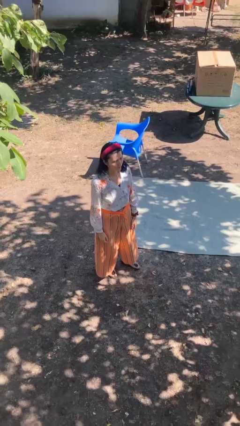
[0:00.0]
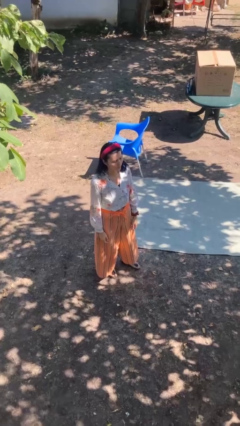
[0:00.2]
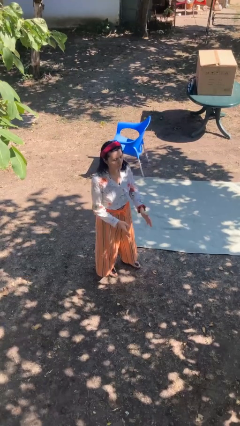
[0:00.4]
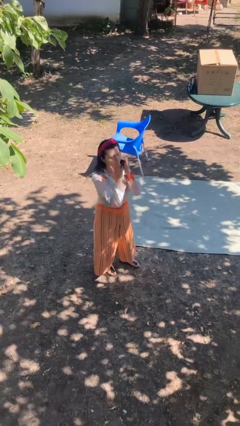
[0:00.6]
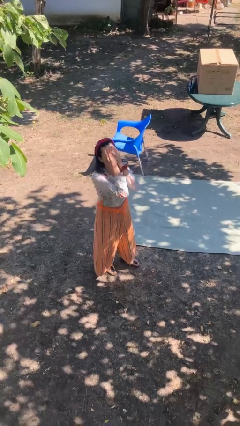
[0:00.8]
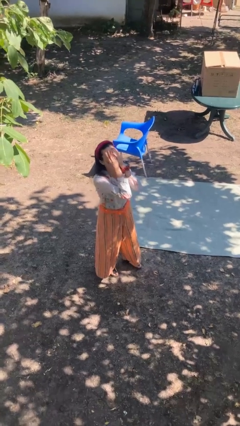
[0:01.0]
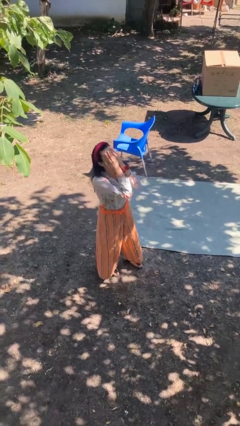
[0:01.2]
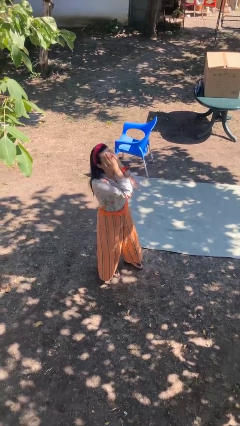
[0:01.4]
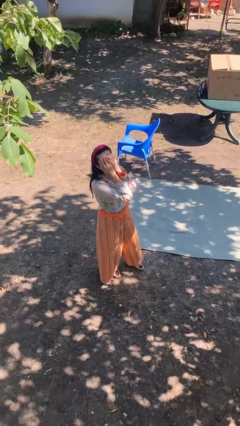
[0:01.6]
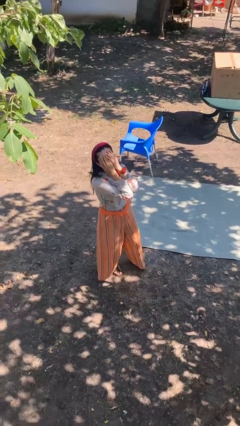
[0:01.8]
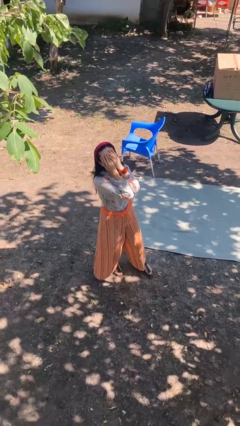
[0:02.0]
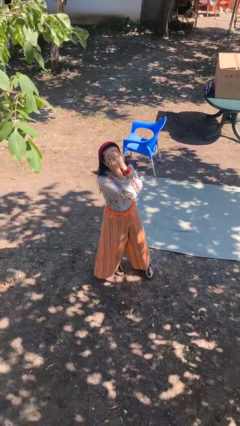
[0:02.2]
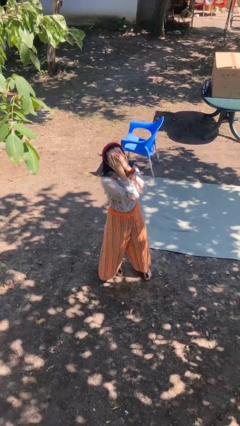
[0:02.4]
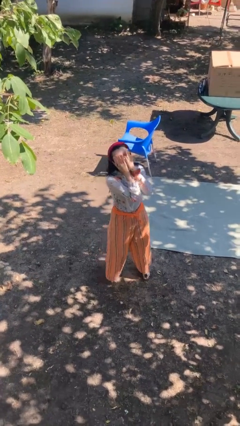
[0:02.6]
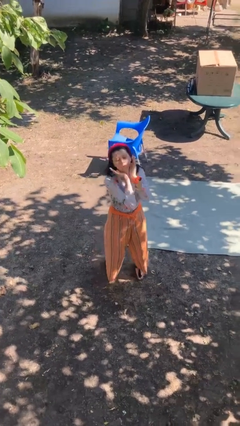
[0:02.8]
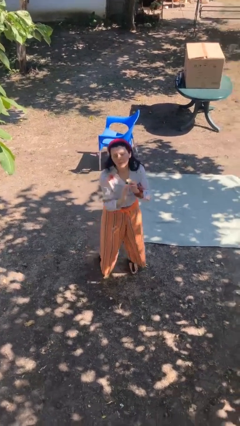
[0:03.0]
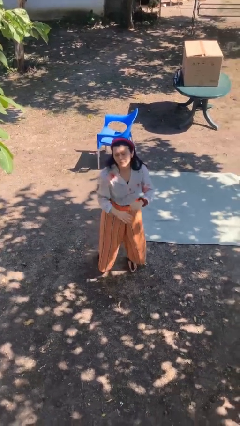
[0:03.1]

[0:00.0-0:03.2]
person covers face with hands

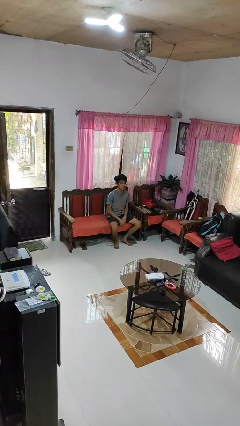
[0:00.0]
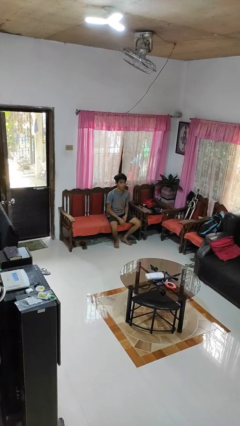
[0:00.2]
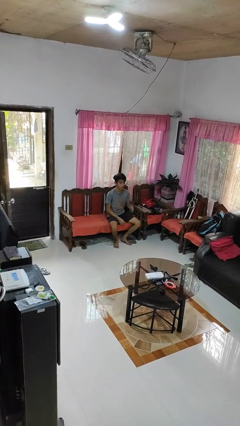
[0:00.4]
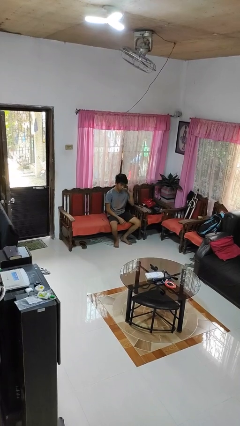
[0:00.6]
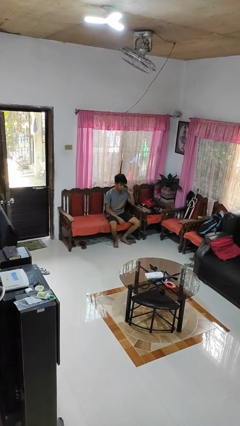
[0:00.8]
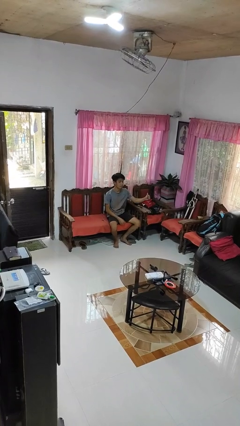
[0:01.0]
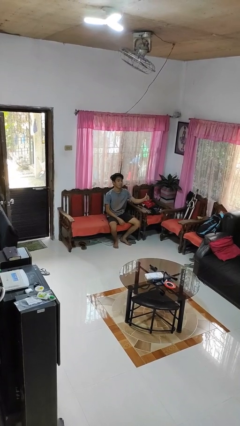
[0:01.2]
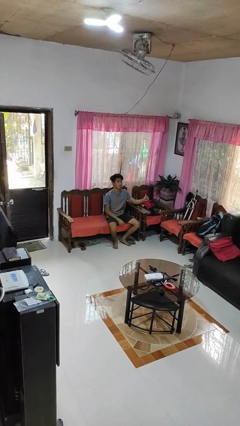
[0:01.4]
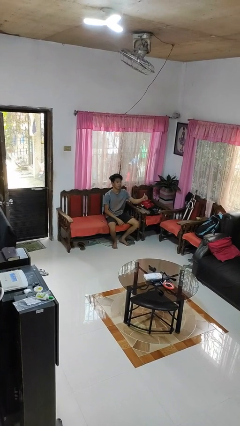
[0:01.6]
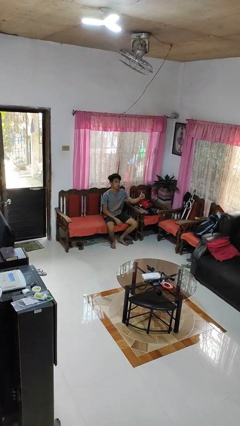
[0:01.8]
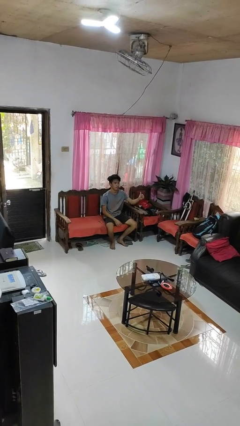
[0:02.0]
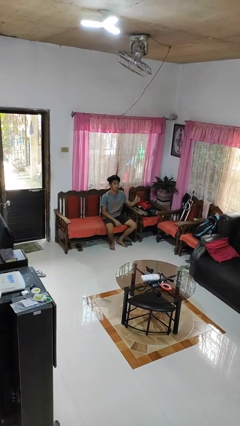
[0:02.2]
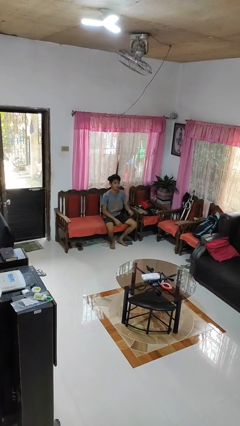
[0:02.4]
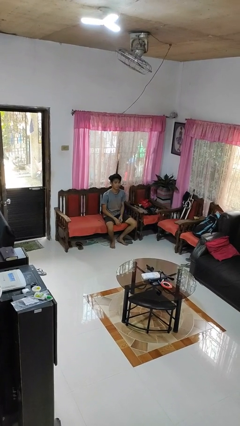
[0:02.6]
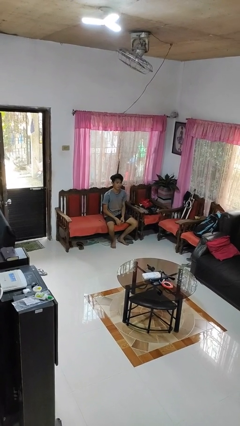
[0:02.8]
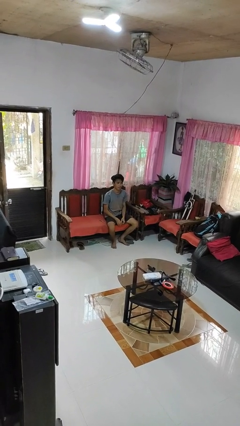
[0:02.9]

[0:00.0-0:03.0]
person gestures thumbs up

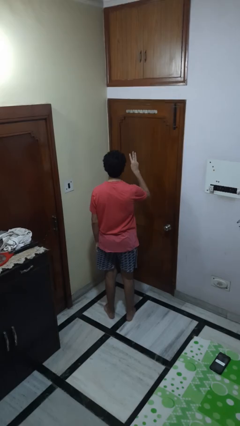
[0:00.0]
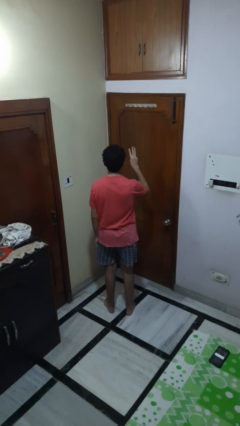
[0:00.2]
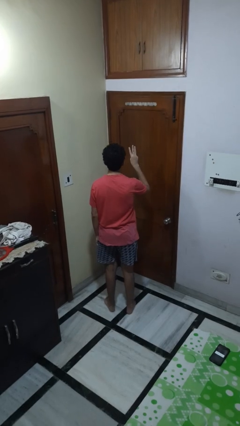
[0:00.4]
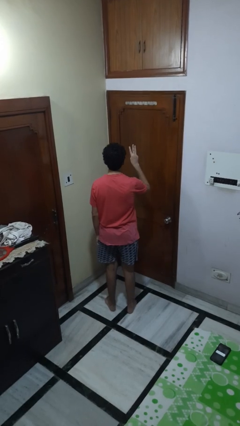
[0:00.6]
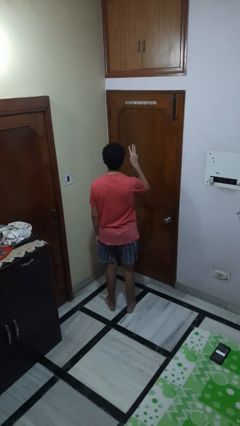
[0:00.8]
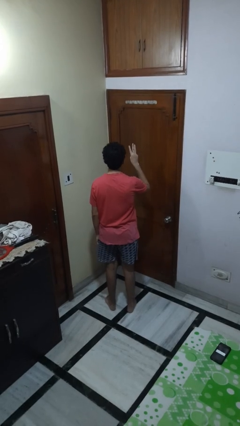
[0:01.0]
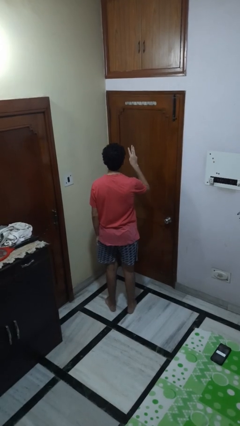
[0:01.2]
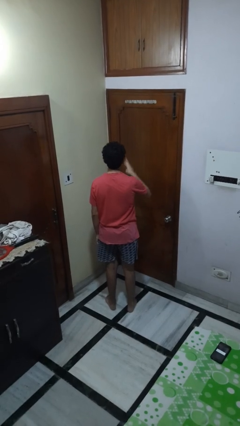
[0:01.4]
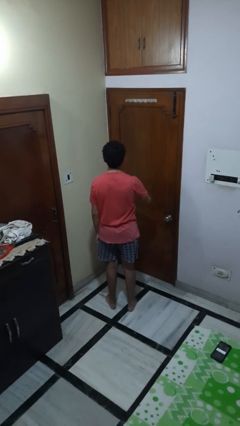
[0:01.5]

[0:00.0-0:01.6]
person gestures number three

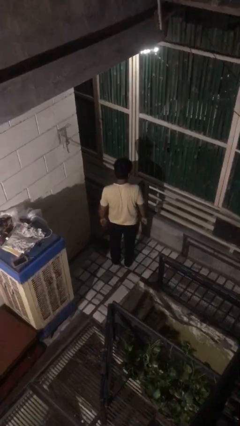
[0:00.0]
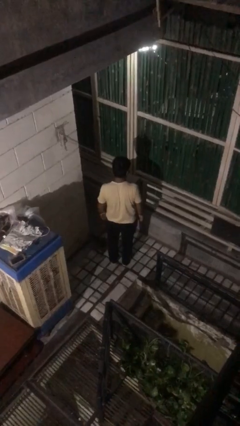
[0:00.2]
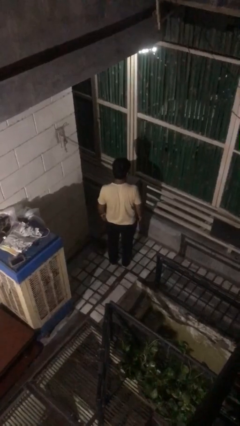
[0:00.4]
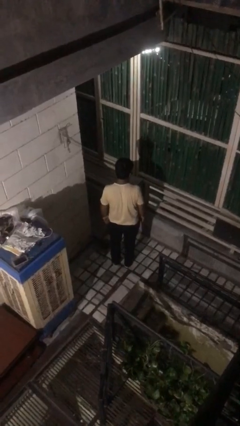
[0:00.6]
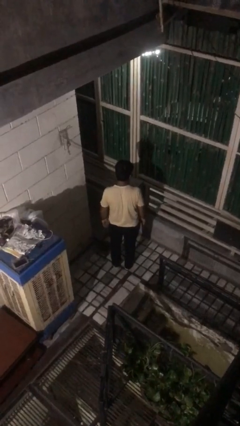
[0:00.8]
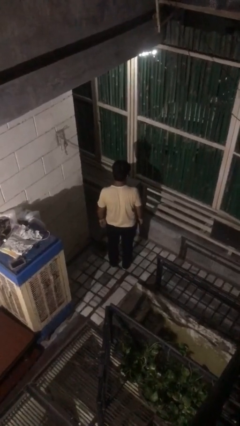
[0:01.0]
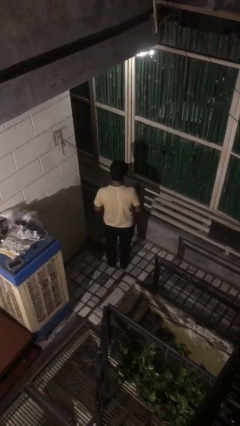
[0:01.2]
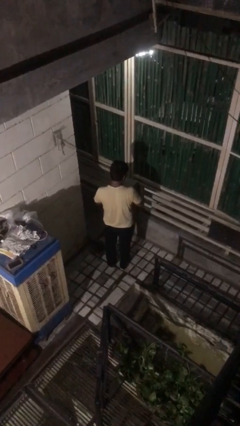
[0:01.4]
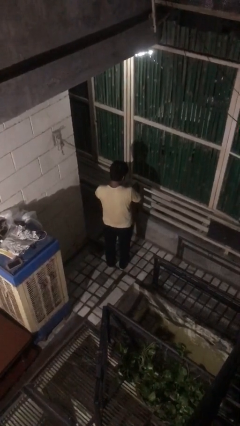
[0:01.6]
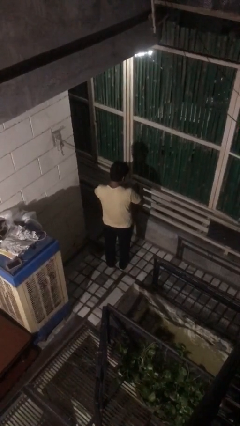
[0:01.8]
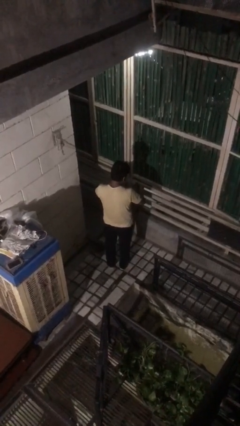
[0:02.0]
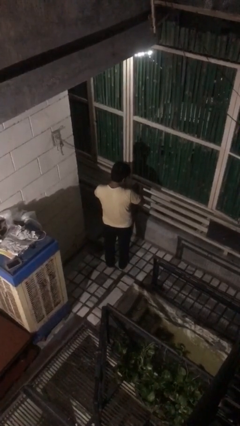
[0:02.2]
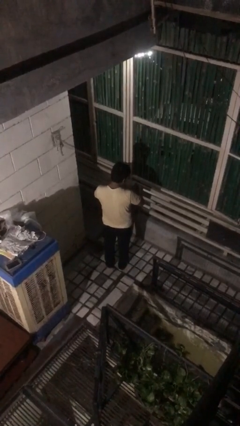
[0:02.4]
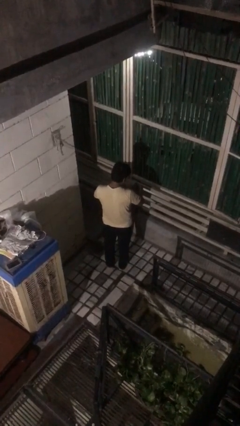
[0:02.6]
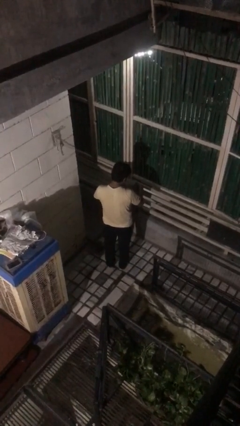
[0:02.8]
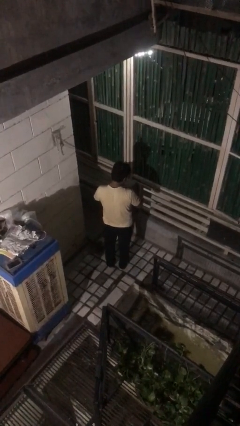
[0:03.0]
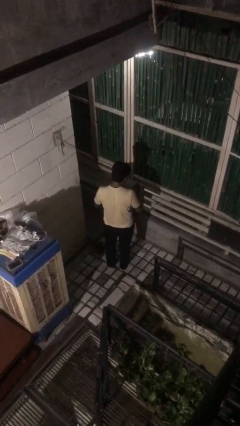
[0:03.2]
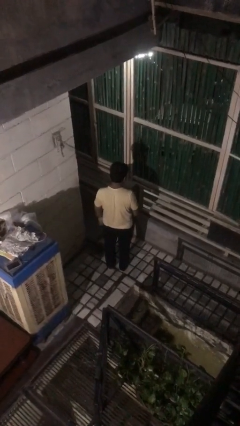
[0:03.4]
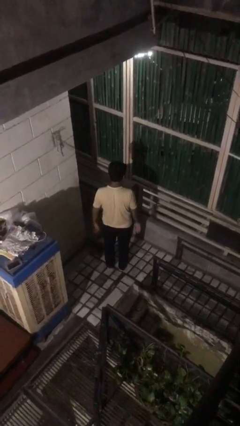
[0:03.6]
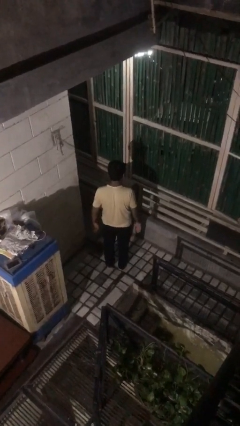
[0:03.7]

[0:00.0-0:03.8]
person swats bug

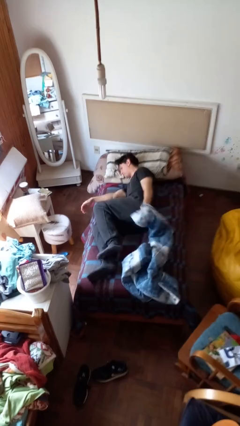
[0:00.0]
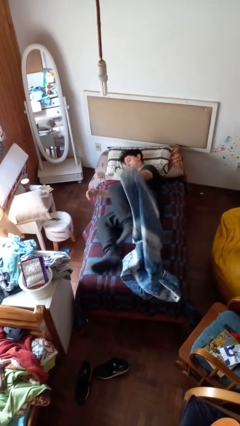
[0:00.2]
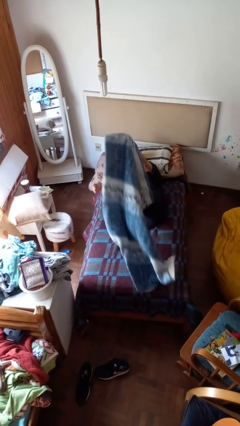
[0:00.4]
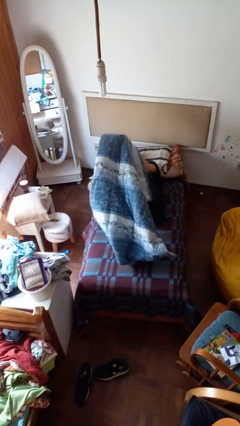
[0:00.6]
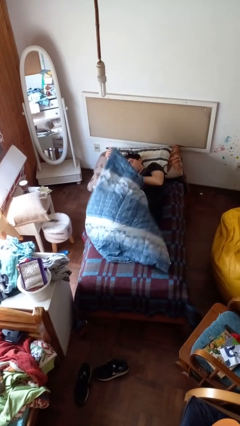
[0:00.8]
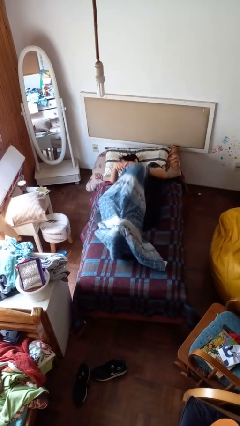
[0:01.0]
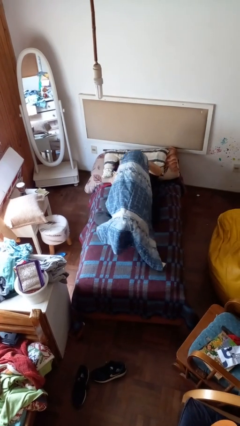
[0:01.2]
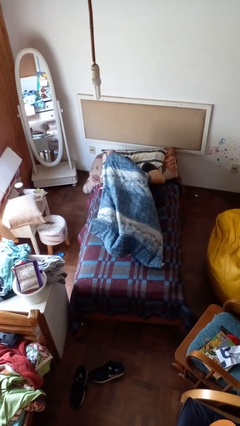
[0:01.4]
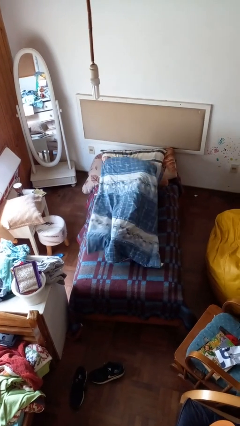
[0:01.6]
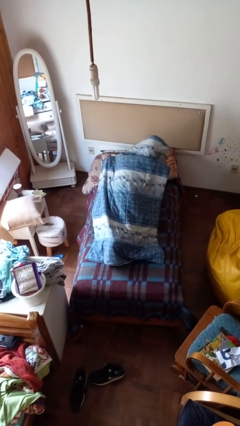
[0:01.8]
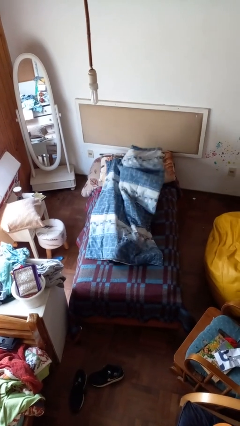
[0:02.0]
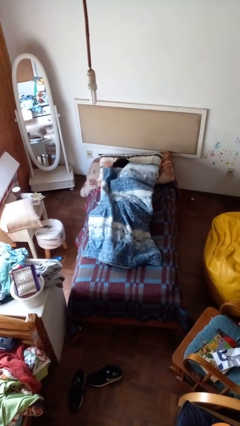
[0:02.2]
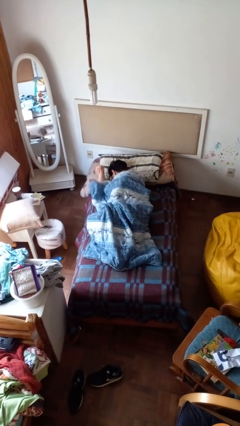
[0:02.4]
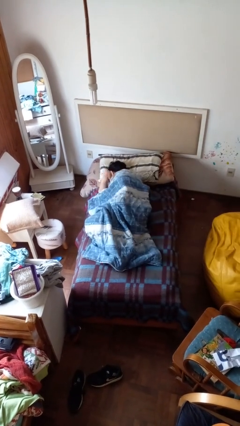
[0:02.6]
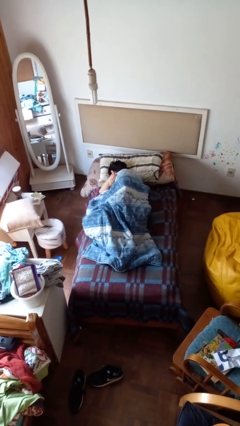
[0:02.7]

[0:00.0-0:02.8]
person covers with bedsheets

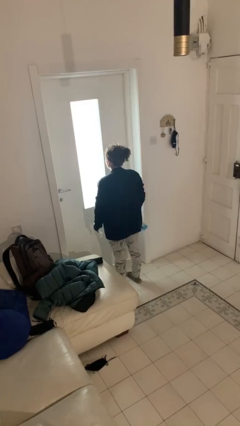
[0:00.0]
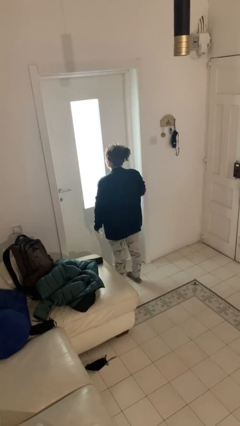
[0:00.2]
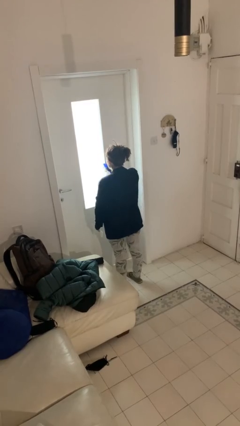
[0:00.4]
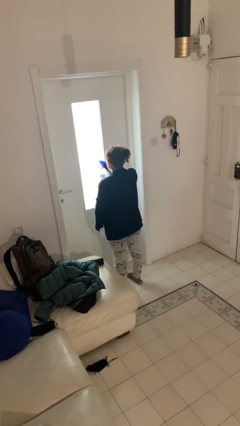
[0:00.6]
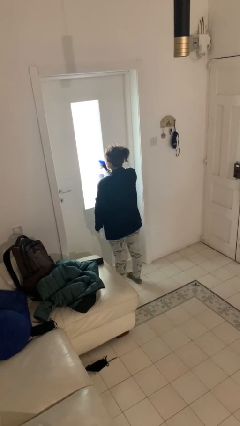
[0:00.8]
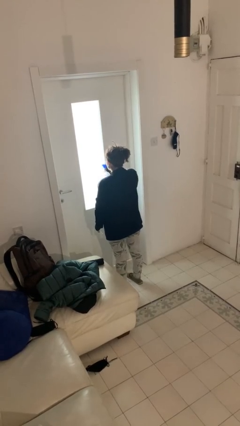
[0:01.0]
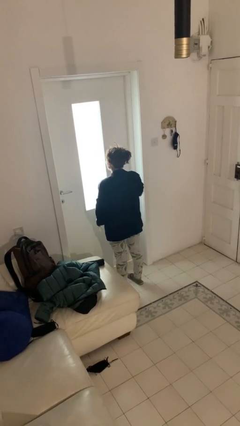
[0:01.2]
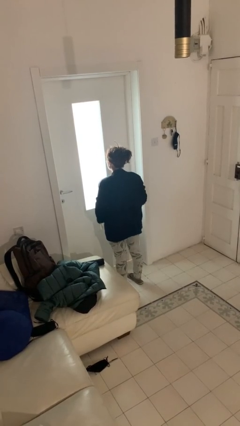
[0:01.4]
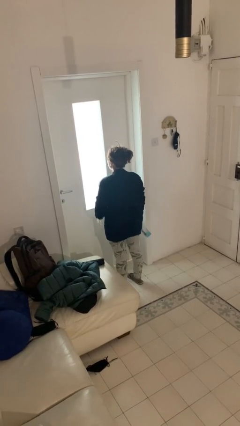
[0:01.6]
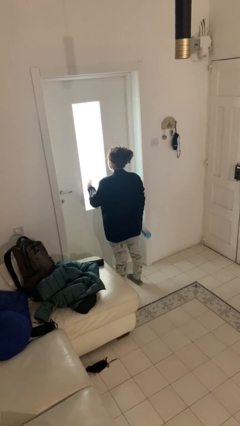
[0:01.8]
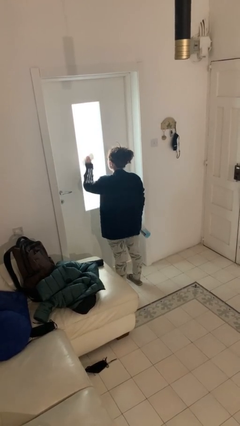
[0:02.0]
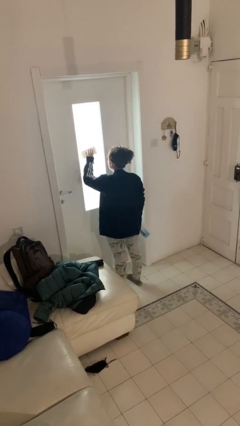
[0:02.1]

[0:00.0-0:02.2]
person sprays from bottle

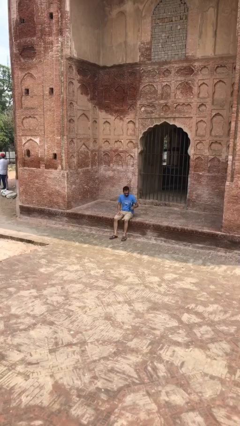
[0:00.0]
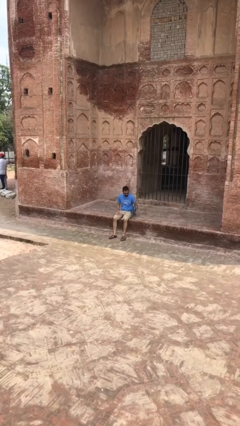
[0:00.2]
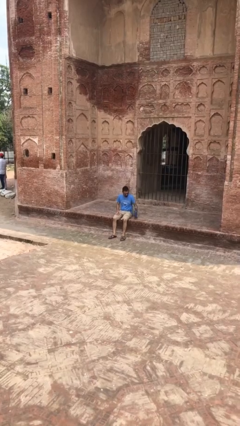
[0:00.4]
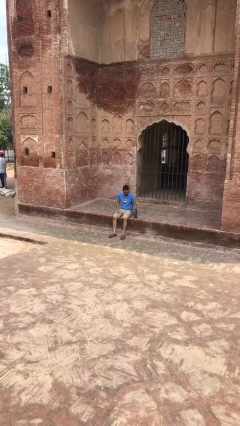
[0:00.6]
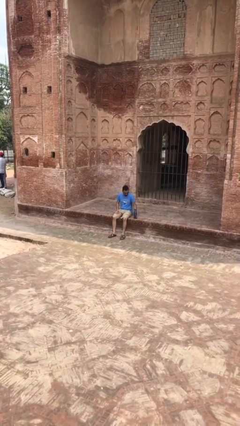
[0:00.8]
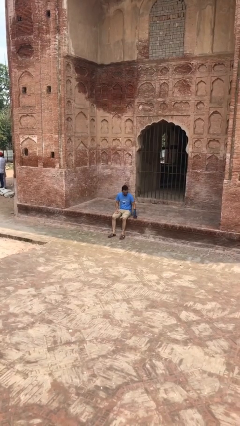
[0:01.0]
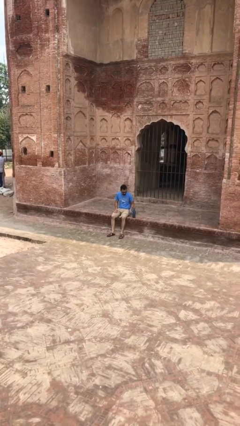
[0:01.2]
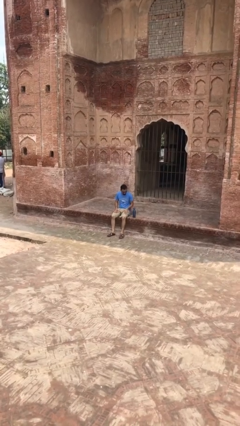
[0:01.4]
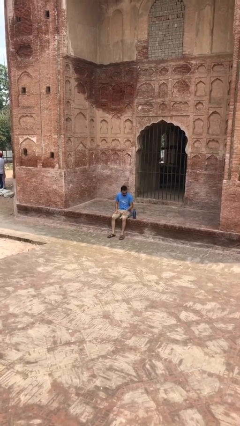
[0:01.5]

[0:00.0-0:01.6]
person puts down object on floor
